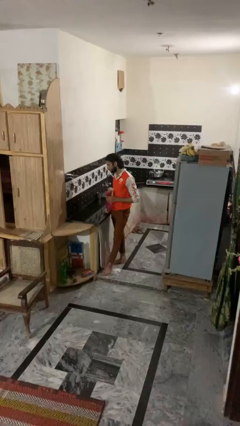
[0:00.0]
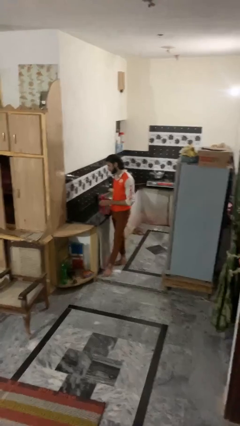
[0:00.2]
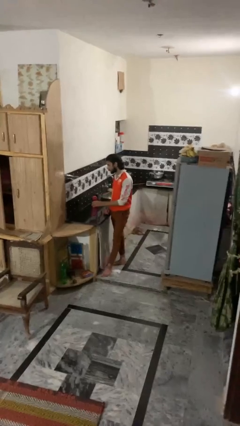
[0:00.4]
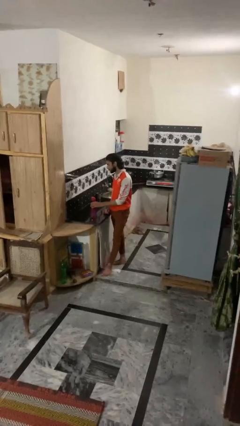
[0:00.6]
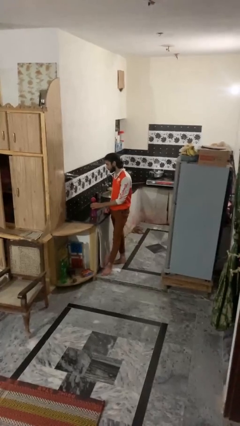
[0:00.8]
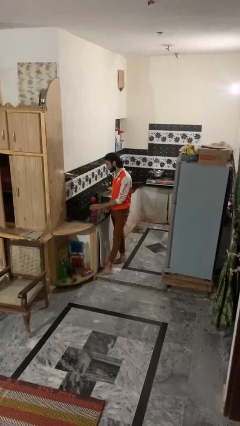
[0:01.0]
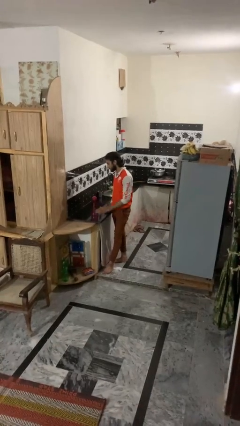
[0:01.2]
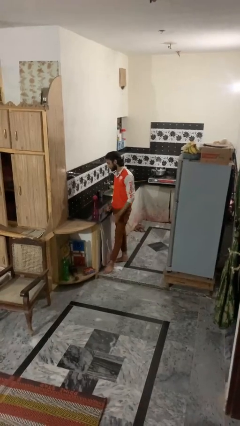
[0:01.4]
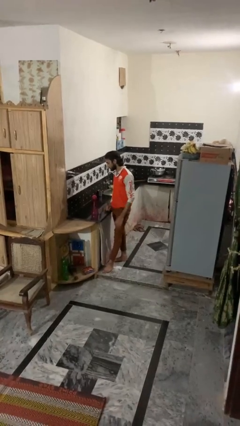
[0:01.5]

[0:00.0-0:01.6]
person puts down object on countertop

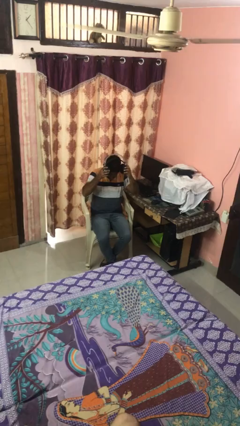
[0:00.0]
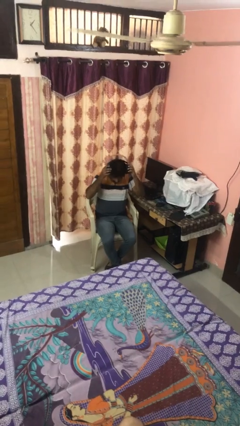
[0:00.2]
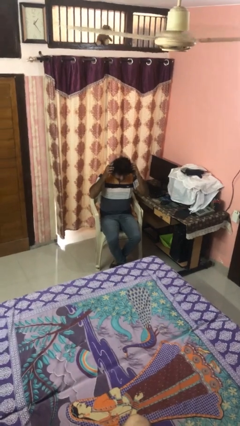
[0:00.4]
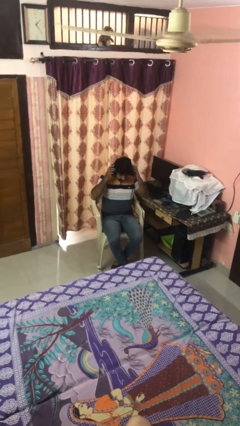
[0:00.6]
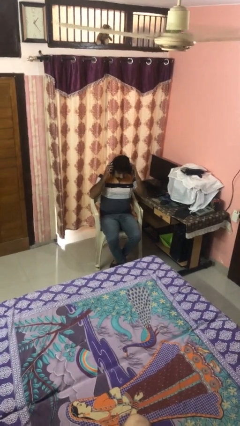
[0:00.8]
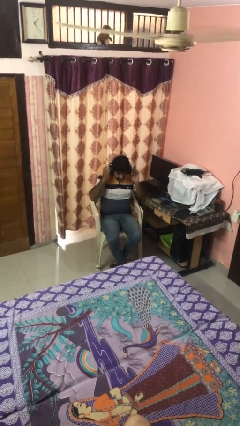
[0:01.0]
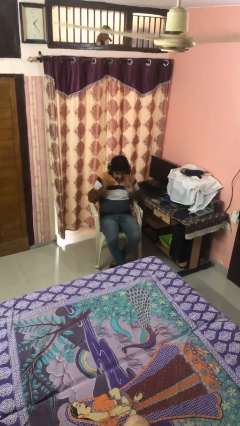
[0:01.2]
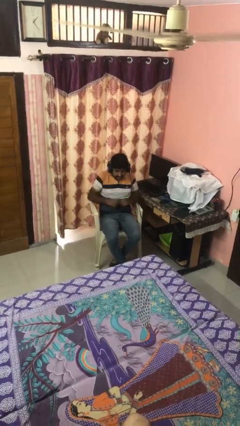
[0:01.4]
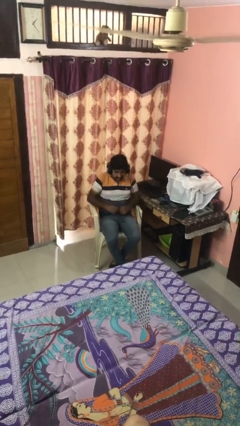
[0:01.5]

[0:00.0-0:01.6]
person puts on headphones

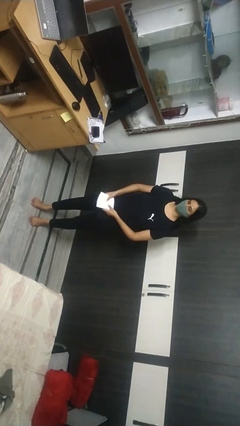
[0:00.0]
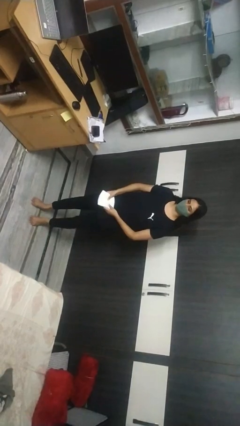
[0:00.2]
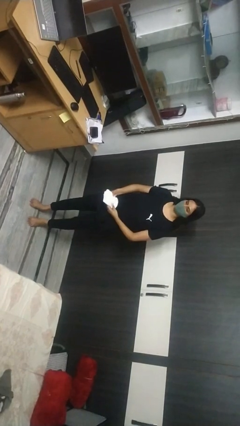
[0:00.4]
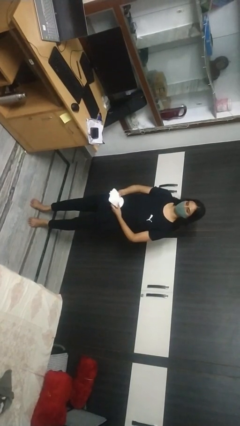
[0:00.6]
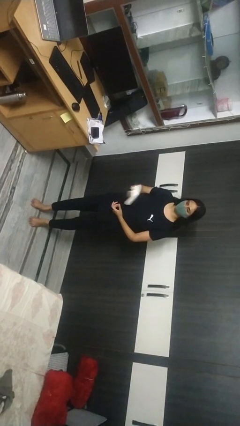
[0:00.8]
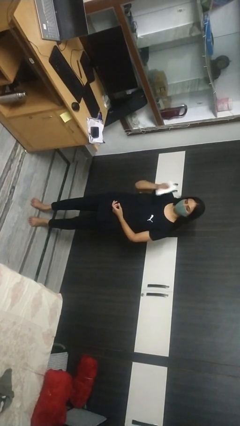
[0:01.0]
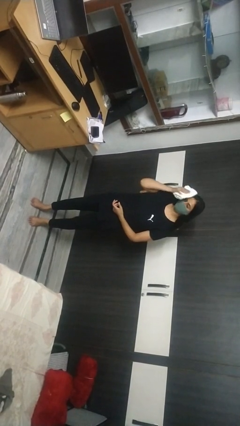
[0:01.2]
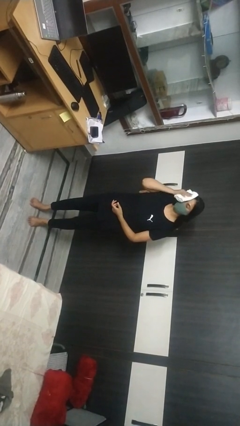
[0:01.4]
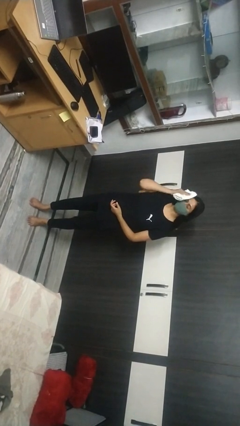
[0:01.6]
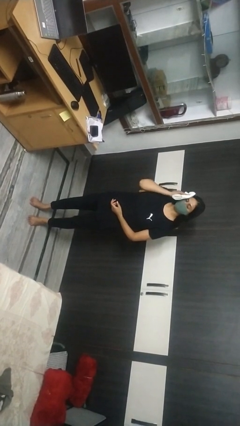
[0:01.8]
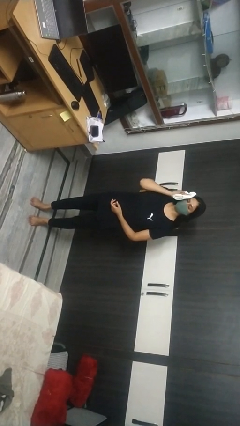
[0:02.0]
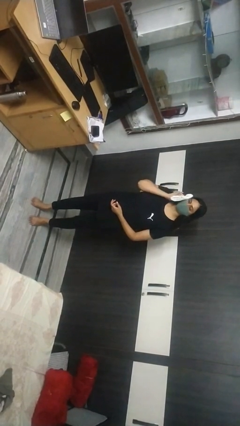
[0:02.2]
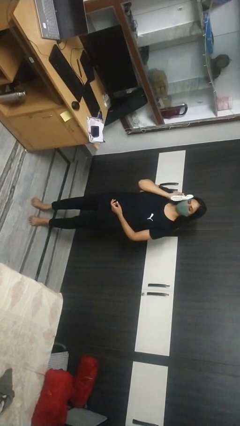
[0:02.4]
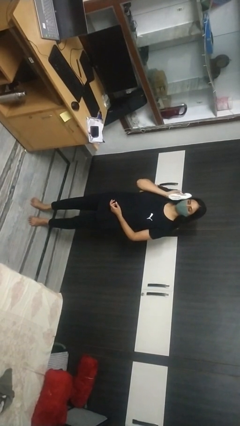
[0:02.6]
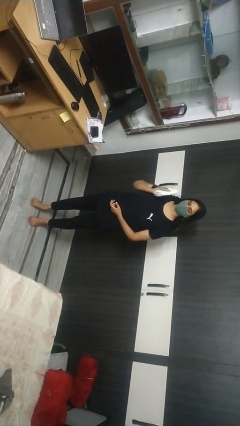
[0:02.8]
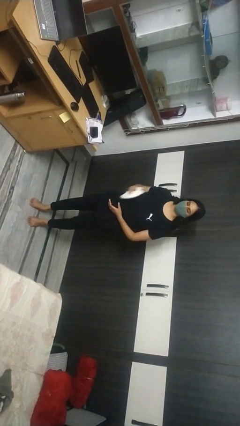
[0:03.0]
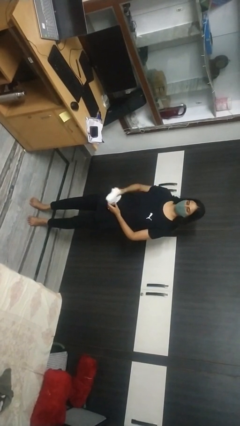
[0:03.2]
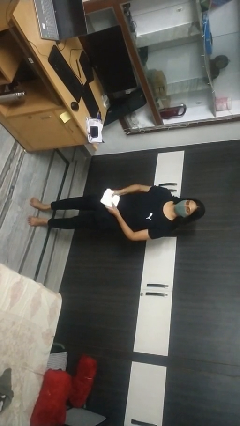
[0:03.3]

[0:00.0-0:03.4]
person wipes mouth with napkin

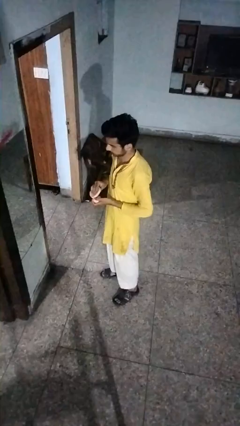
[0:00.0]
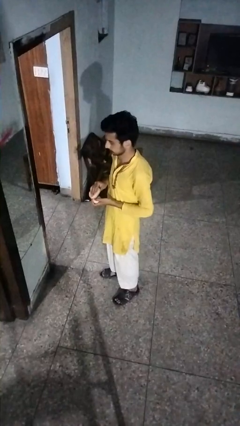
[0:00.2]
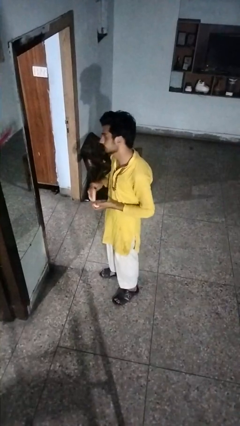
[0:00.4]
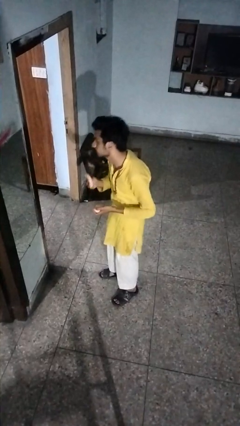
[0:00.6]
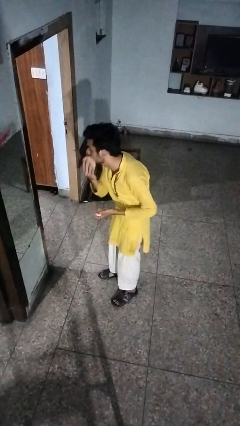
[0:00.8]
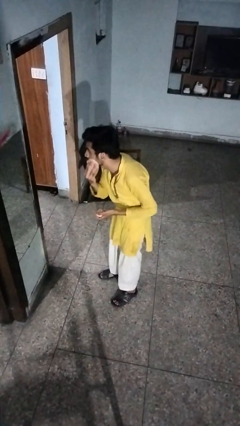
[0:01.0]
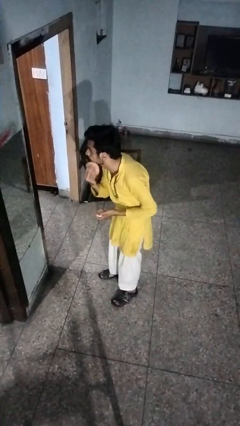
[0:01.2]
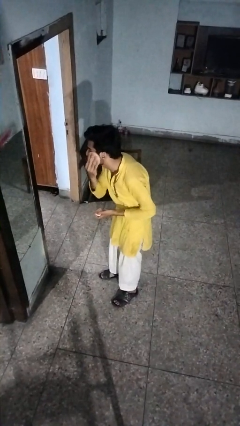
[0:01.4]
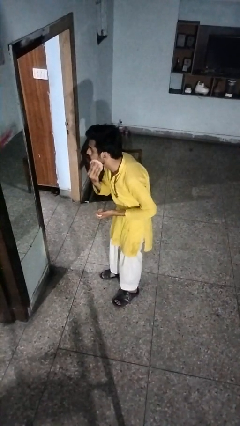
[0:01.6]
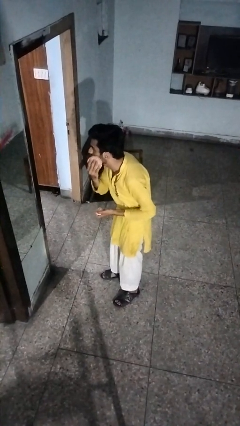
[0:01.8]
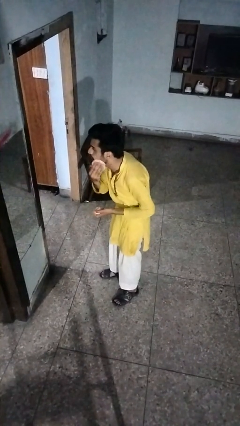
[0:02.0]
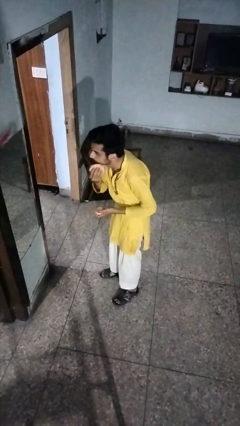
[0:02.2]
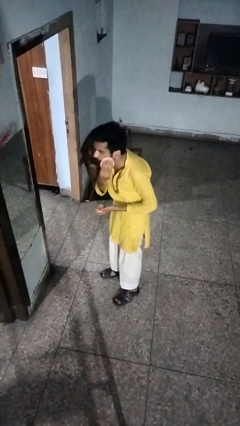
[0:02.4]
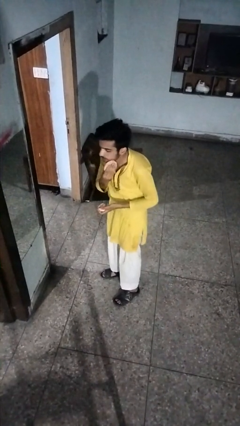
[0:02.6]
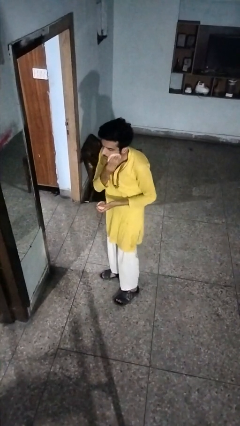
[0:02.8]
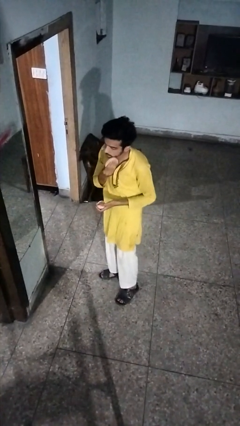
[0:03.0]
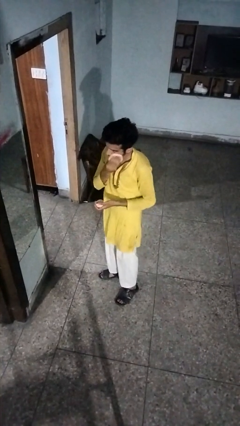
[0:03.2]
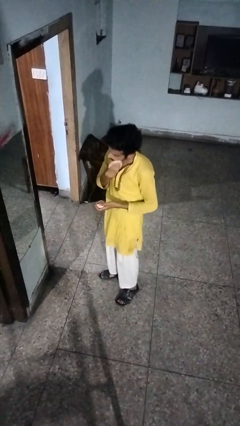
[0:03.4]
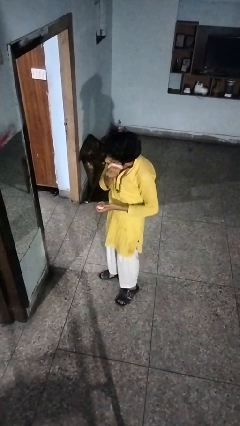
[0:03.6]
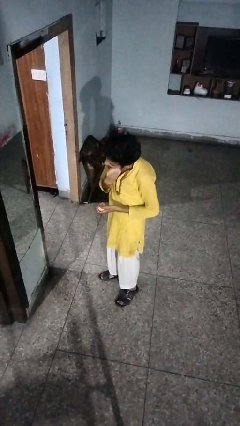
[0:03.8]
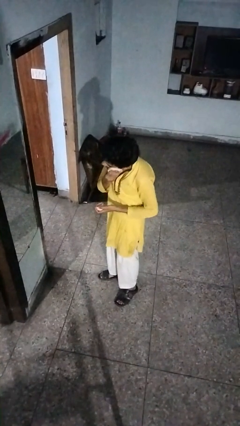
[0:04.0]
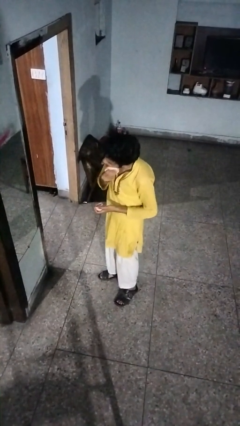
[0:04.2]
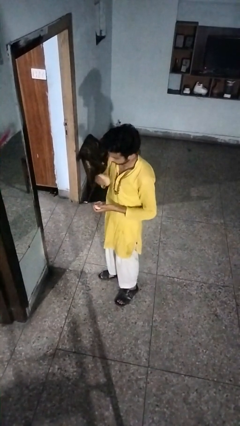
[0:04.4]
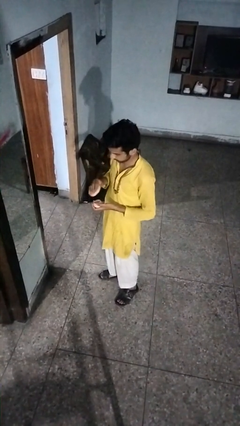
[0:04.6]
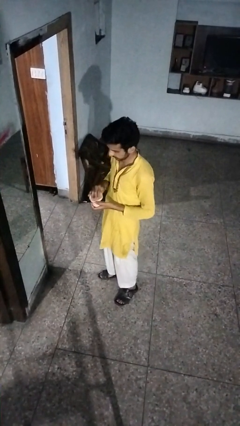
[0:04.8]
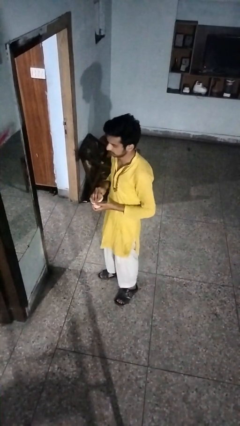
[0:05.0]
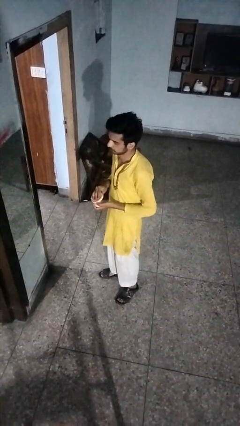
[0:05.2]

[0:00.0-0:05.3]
person applies foundation makeup

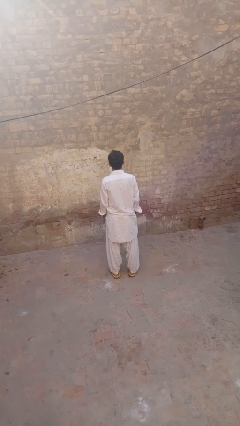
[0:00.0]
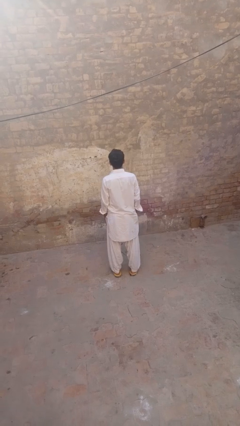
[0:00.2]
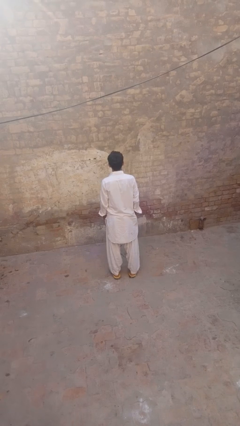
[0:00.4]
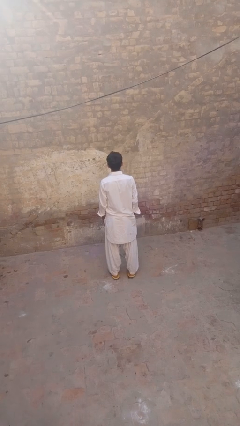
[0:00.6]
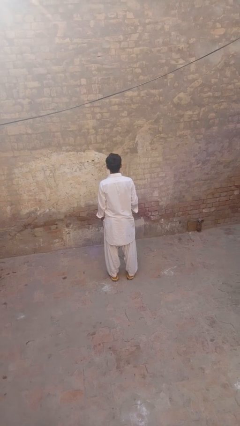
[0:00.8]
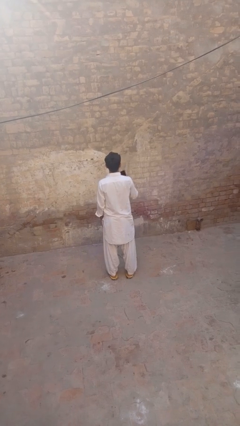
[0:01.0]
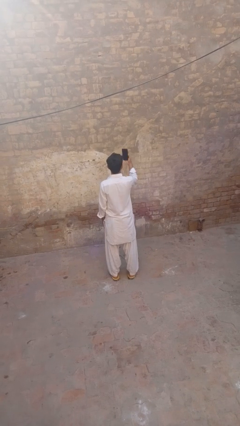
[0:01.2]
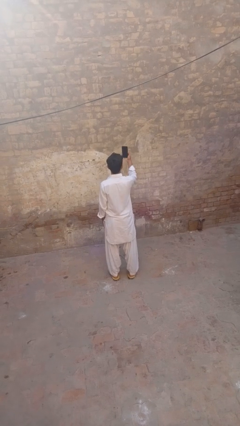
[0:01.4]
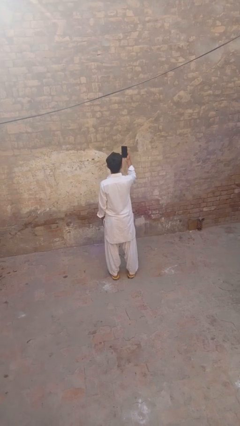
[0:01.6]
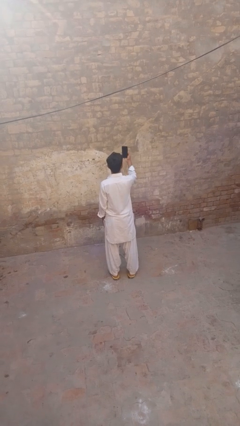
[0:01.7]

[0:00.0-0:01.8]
person takes selfie

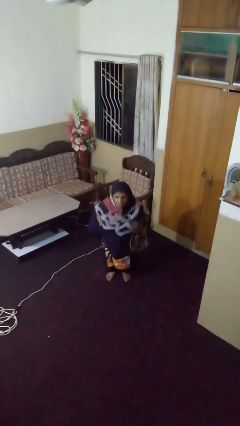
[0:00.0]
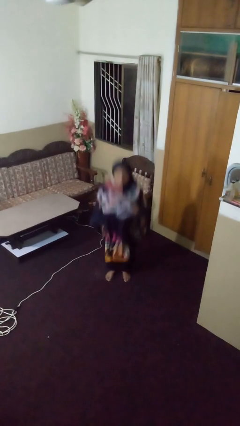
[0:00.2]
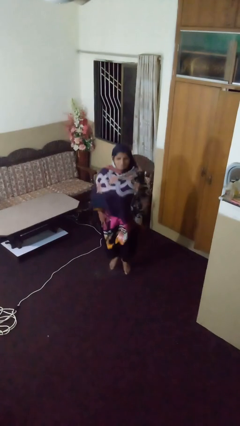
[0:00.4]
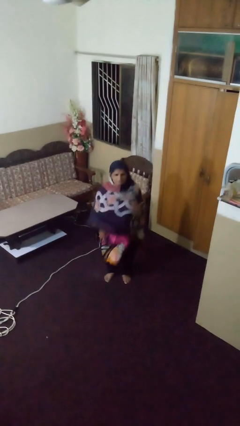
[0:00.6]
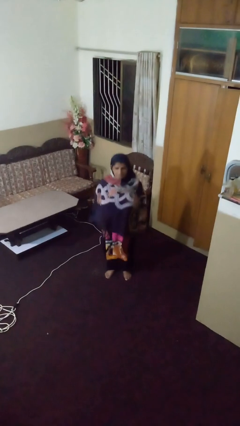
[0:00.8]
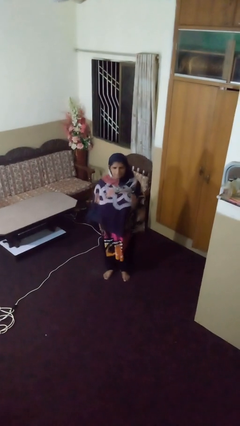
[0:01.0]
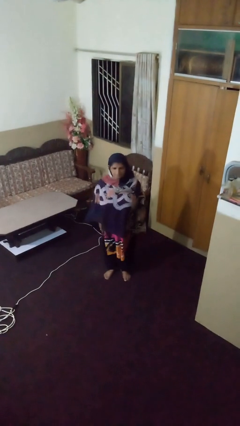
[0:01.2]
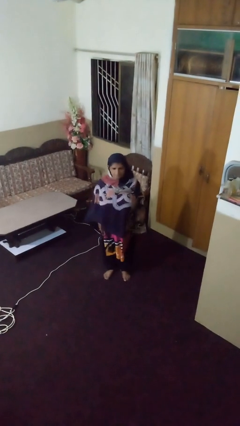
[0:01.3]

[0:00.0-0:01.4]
person jumps

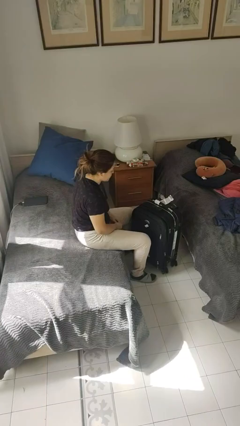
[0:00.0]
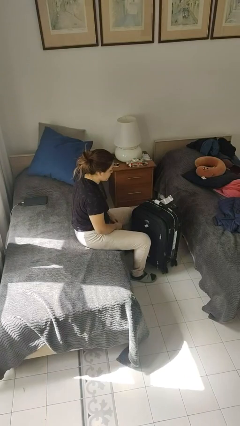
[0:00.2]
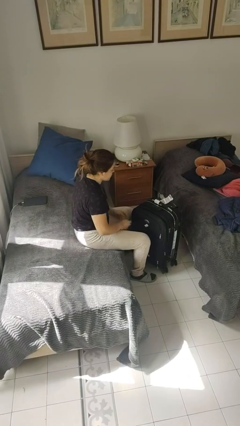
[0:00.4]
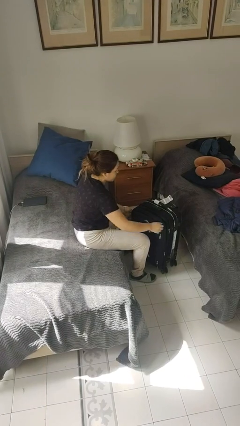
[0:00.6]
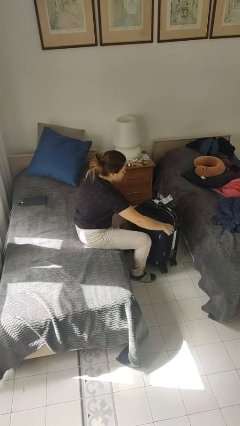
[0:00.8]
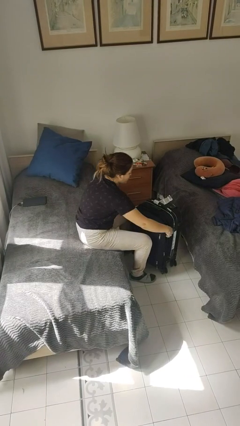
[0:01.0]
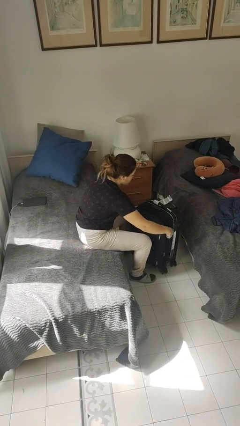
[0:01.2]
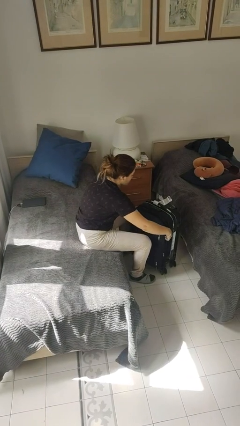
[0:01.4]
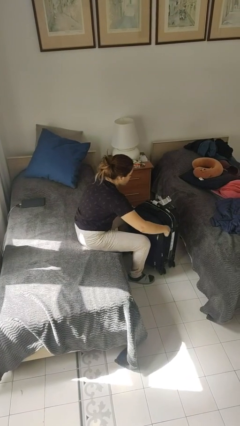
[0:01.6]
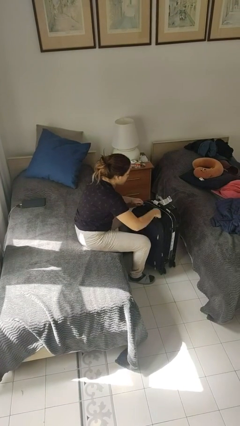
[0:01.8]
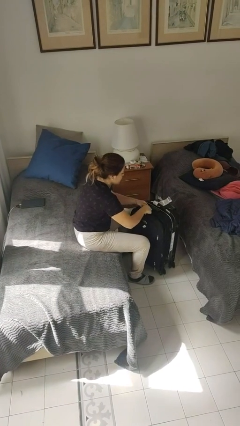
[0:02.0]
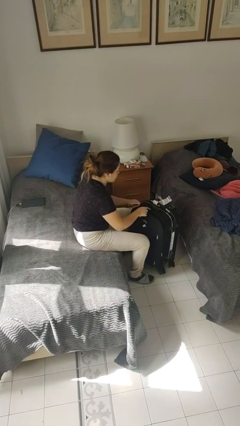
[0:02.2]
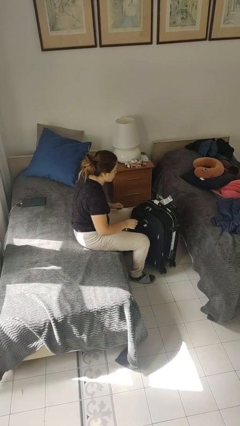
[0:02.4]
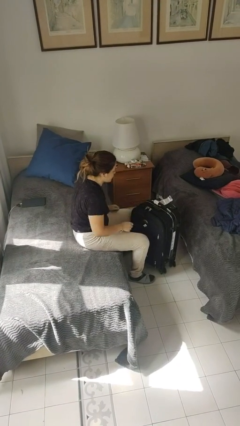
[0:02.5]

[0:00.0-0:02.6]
person closes suitcase
